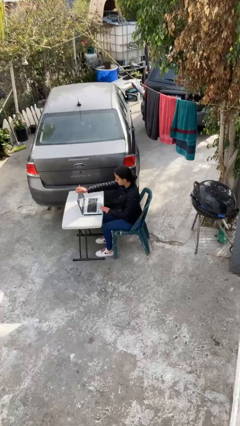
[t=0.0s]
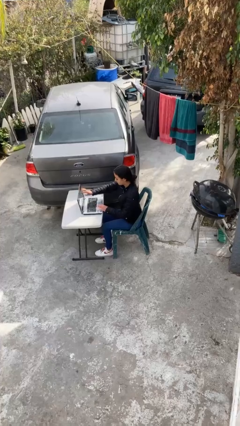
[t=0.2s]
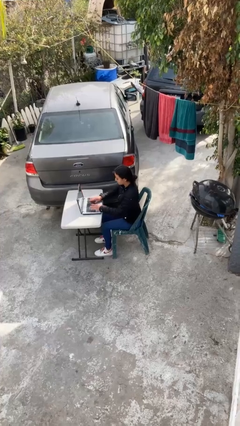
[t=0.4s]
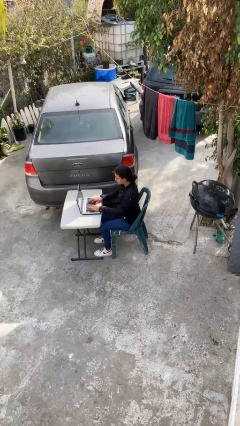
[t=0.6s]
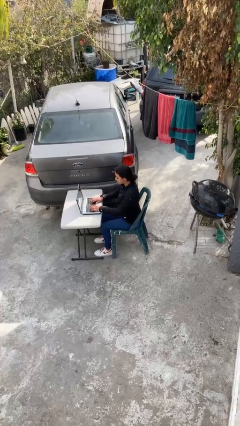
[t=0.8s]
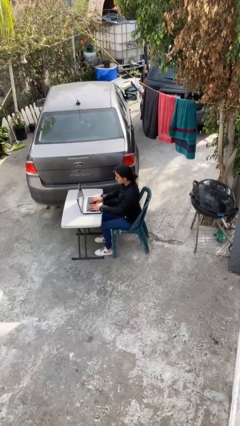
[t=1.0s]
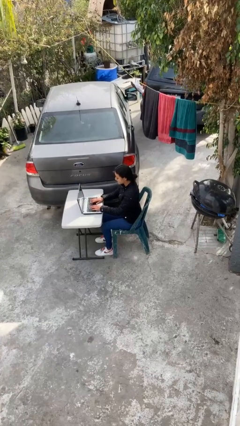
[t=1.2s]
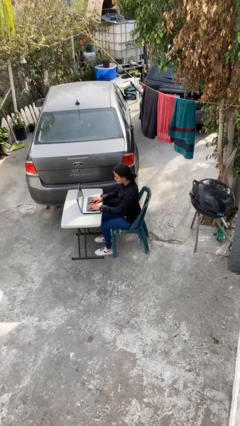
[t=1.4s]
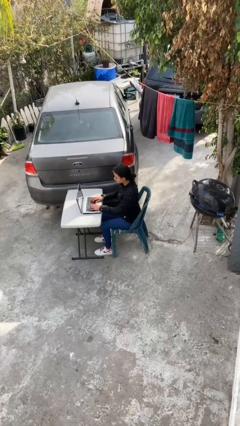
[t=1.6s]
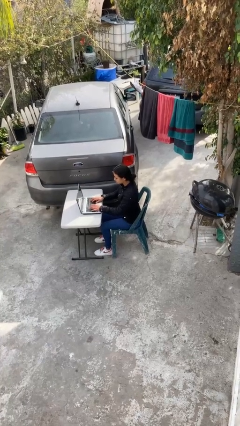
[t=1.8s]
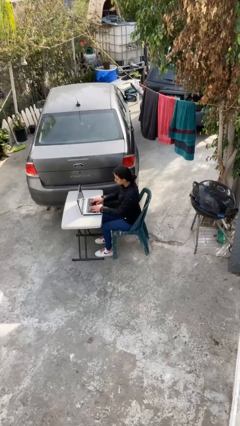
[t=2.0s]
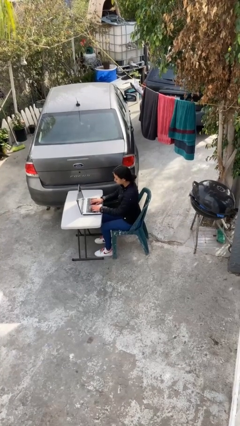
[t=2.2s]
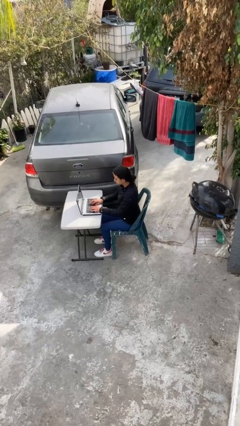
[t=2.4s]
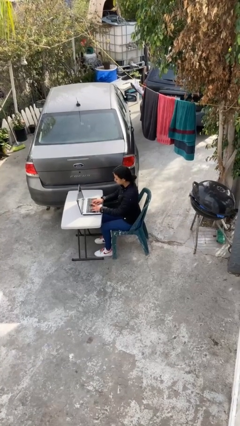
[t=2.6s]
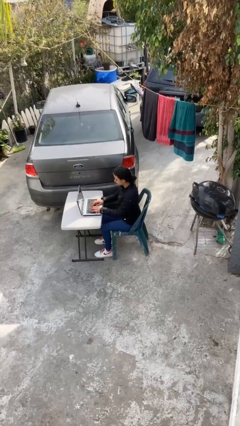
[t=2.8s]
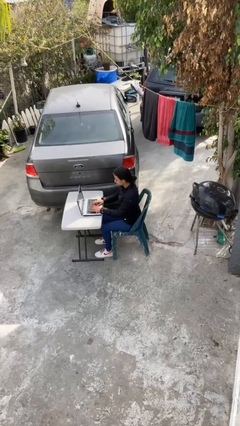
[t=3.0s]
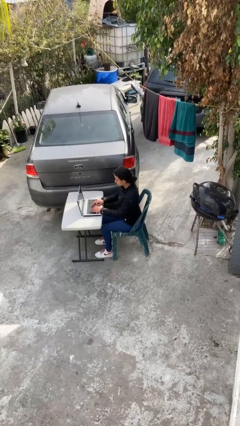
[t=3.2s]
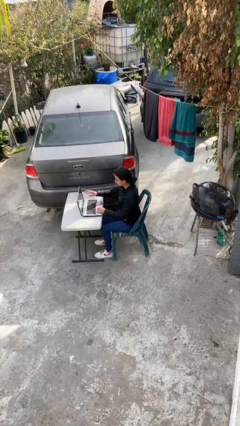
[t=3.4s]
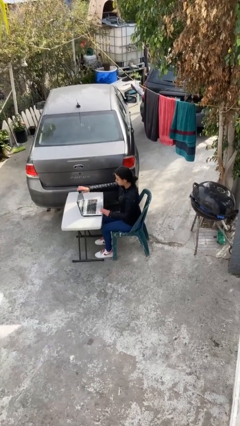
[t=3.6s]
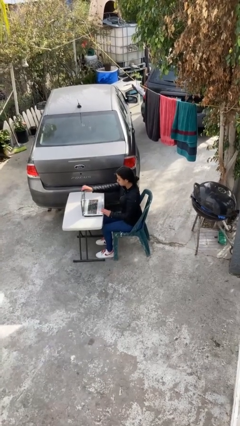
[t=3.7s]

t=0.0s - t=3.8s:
person interacts with laptop

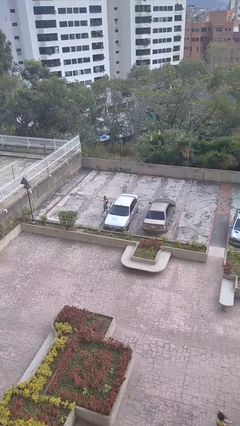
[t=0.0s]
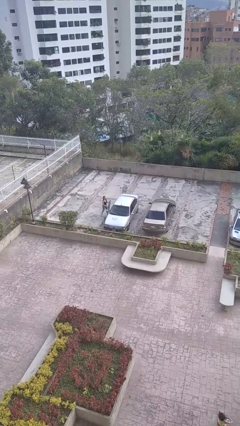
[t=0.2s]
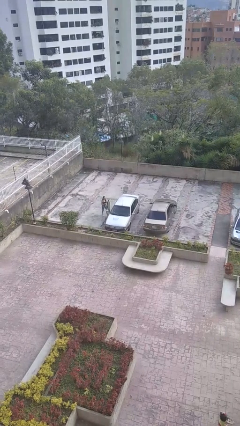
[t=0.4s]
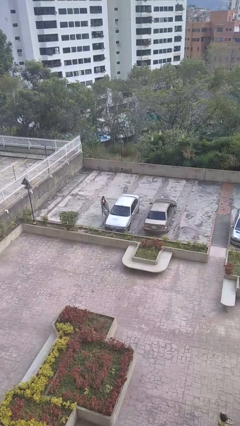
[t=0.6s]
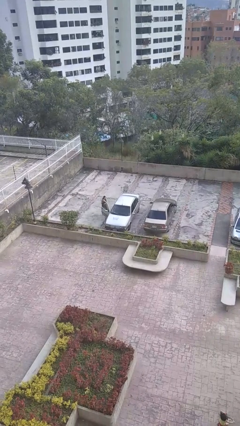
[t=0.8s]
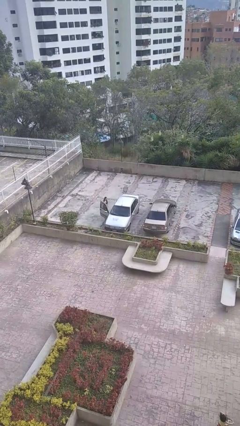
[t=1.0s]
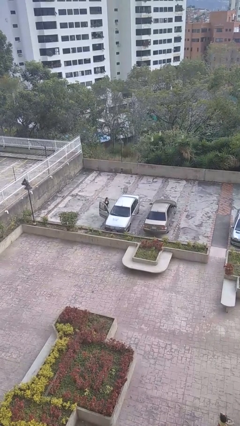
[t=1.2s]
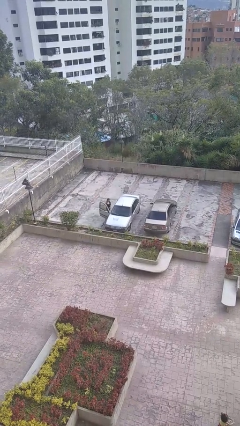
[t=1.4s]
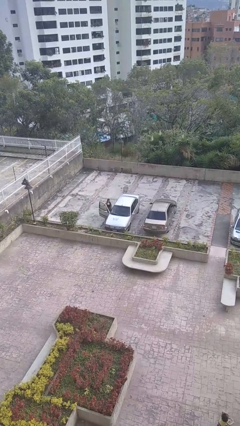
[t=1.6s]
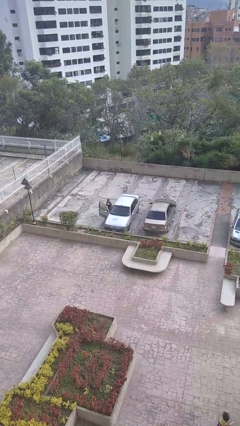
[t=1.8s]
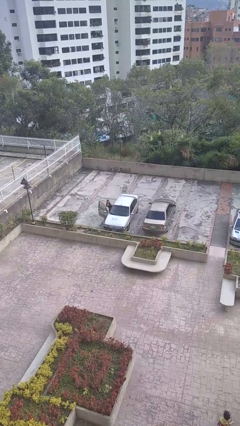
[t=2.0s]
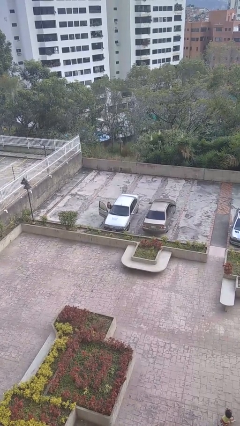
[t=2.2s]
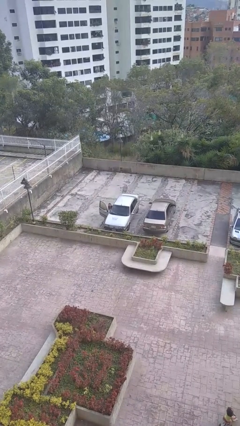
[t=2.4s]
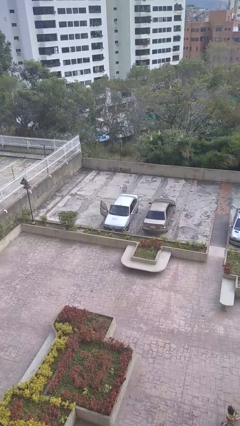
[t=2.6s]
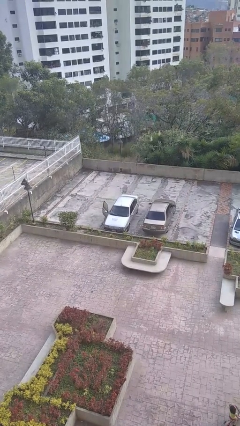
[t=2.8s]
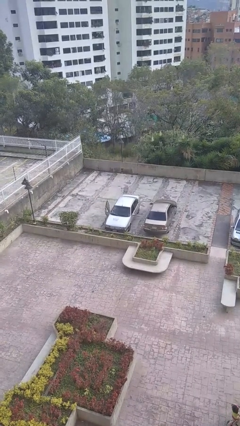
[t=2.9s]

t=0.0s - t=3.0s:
car picks up person

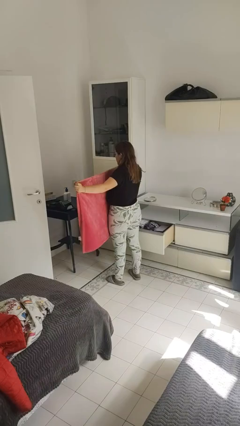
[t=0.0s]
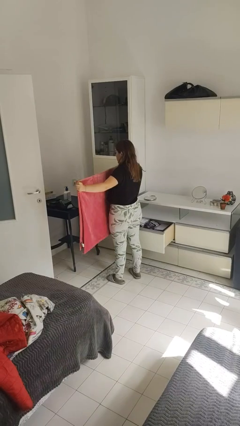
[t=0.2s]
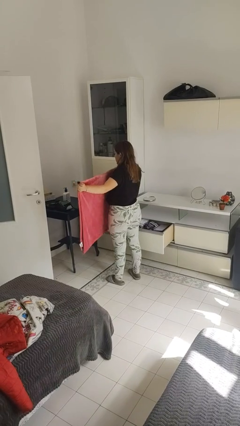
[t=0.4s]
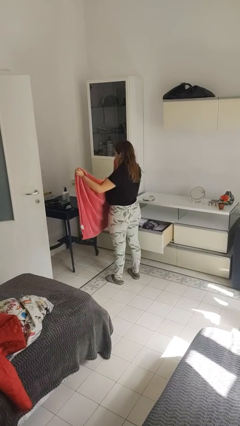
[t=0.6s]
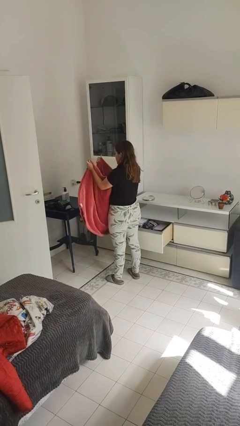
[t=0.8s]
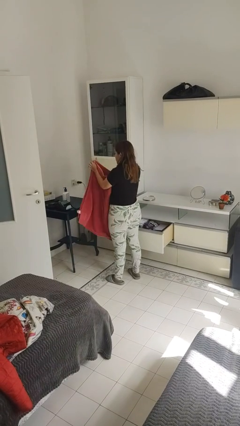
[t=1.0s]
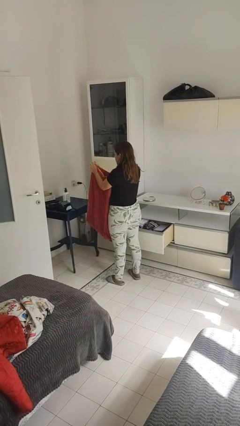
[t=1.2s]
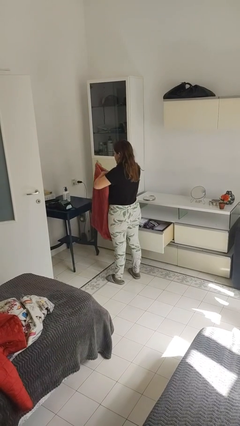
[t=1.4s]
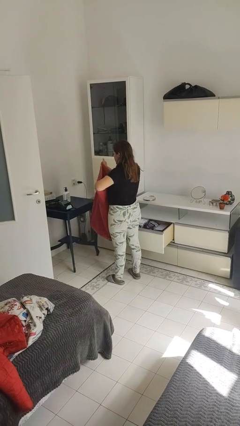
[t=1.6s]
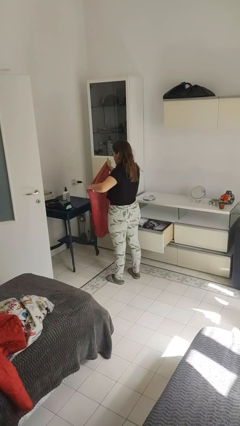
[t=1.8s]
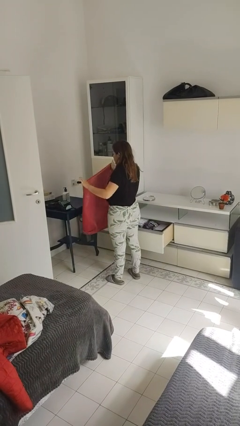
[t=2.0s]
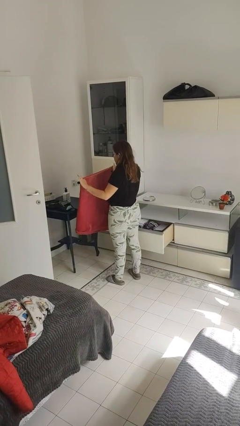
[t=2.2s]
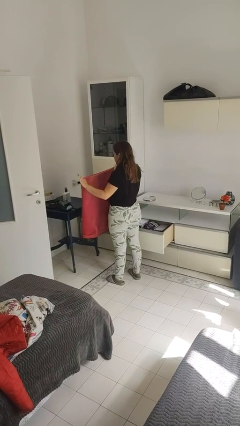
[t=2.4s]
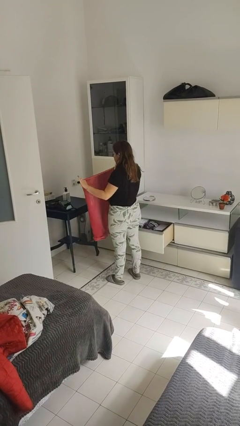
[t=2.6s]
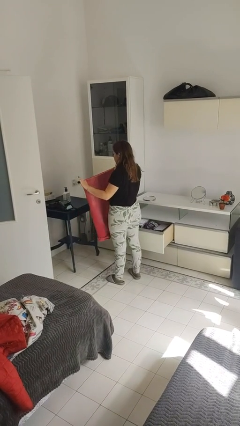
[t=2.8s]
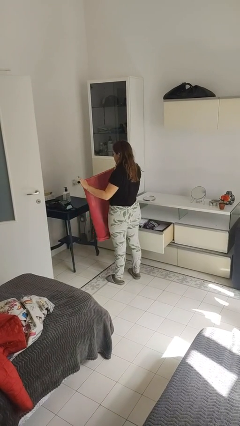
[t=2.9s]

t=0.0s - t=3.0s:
person folds blanket

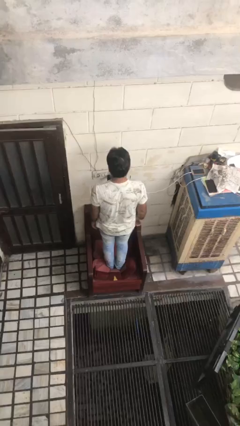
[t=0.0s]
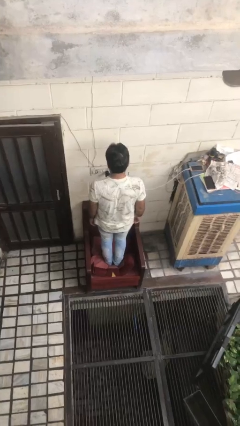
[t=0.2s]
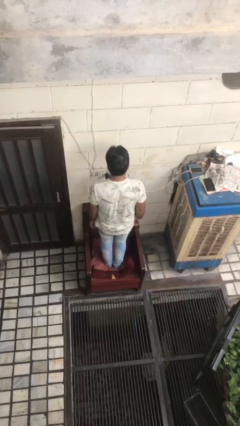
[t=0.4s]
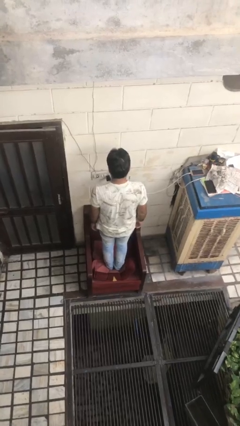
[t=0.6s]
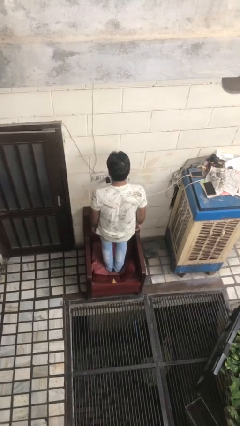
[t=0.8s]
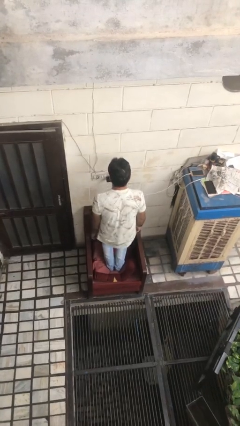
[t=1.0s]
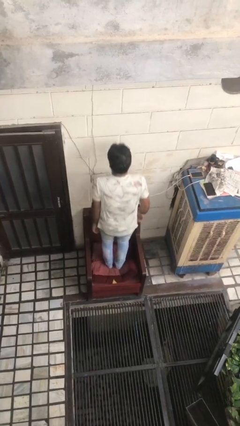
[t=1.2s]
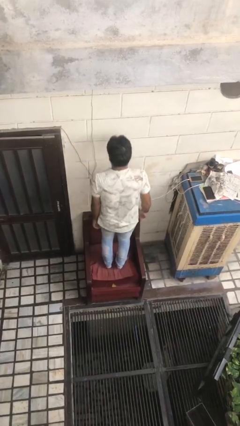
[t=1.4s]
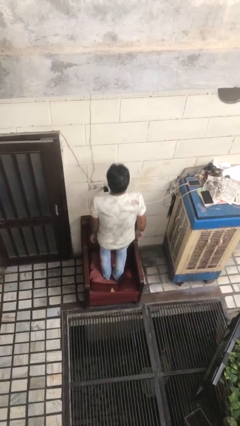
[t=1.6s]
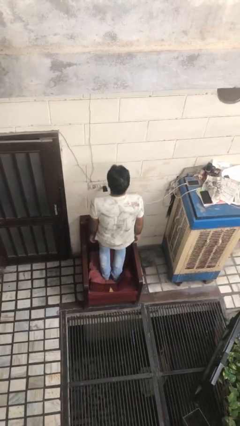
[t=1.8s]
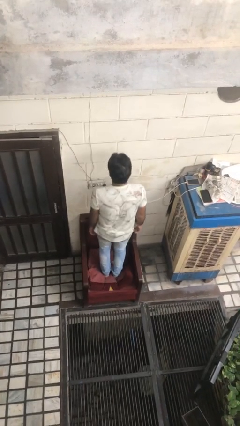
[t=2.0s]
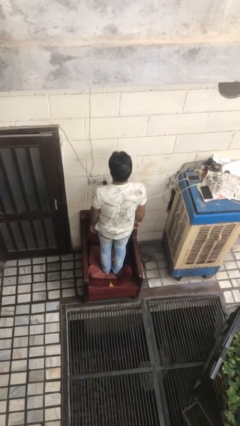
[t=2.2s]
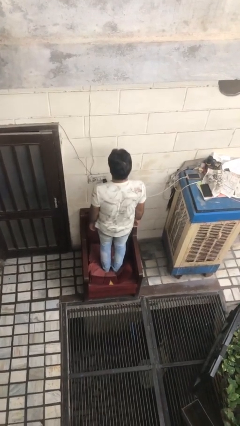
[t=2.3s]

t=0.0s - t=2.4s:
person jumps on couch

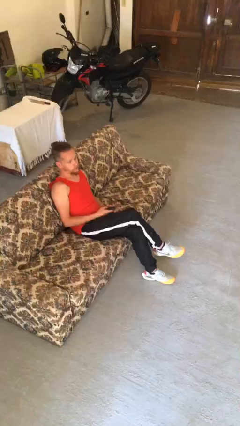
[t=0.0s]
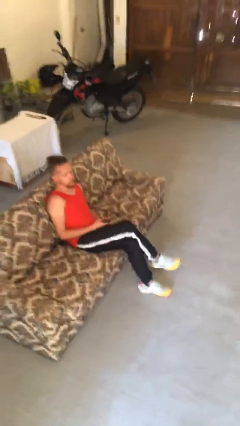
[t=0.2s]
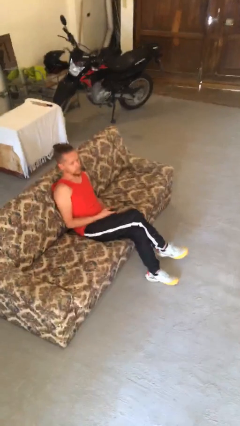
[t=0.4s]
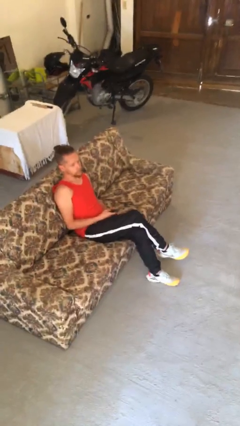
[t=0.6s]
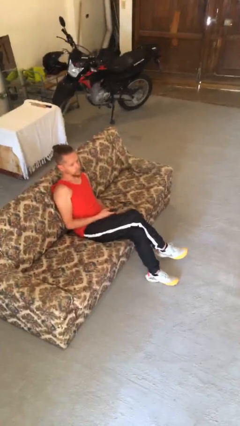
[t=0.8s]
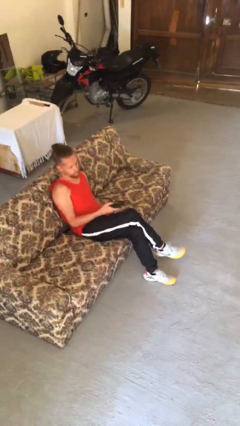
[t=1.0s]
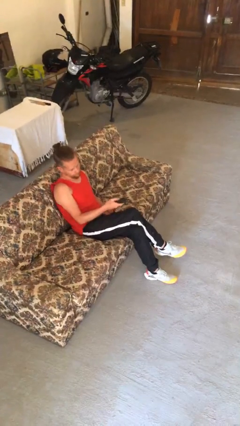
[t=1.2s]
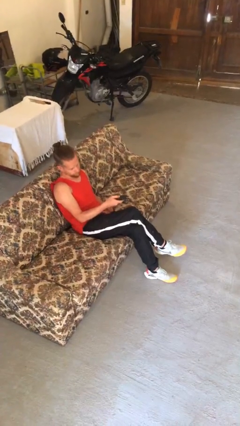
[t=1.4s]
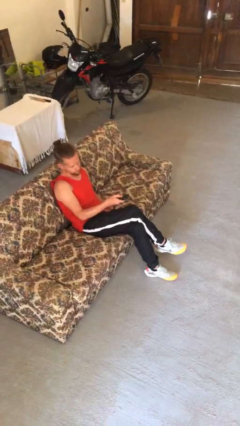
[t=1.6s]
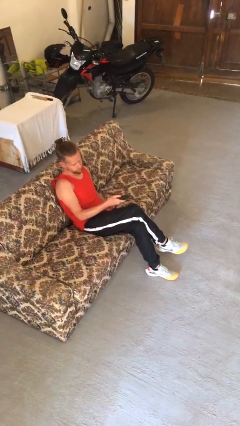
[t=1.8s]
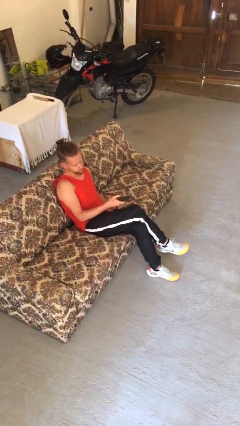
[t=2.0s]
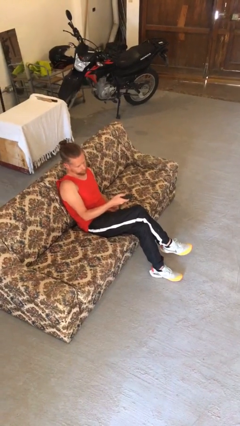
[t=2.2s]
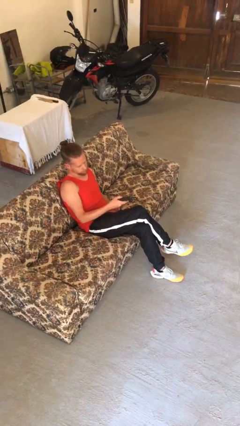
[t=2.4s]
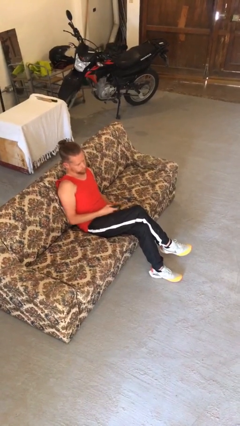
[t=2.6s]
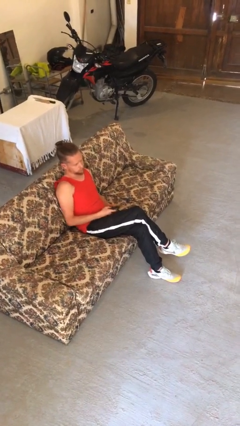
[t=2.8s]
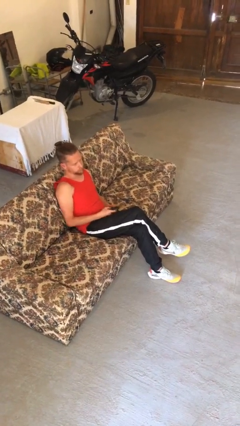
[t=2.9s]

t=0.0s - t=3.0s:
person uses television remote

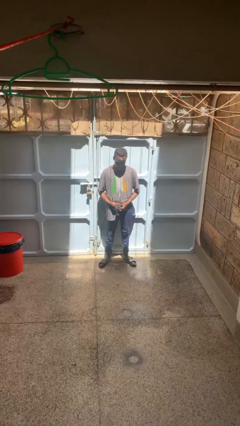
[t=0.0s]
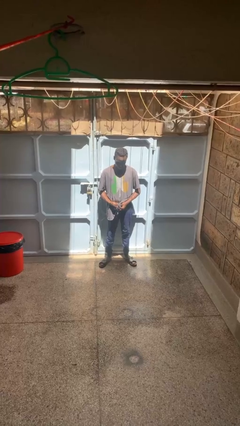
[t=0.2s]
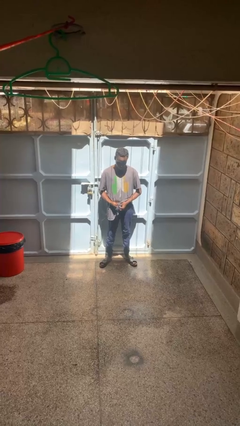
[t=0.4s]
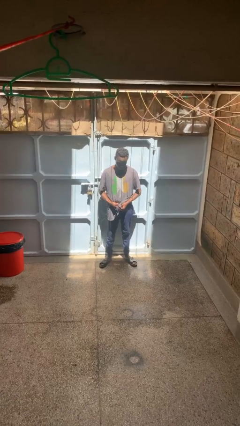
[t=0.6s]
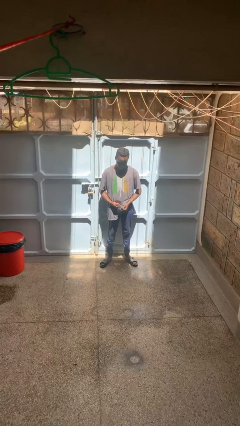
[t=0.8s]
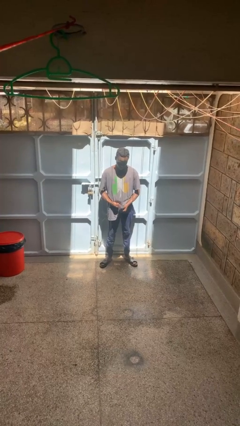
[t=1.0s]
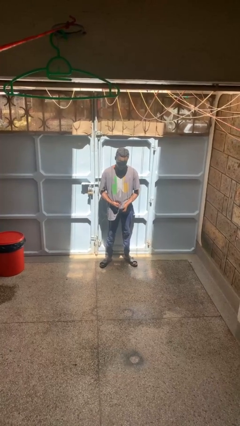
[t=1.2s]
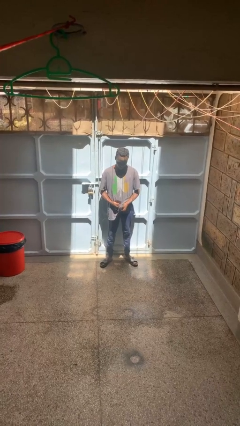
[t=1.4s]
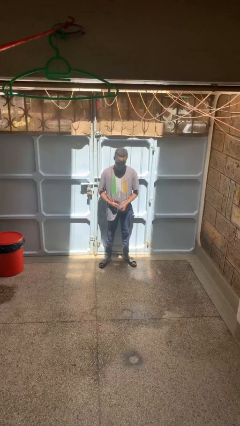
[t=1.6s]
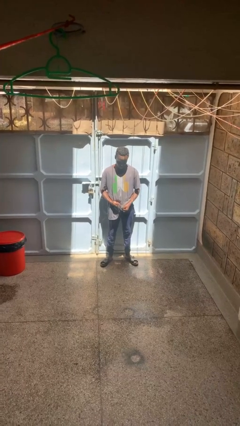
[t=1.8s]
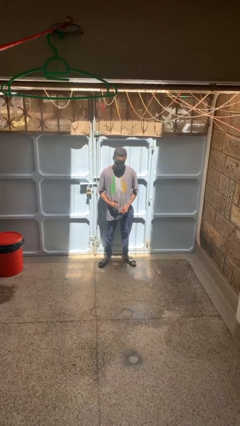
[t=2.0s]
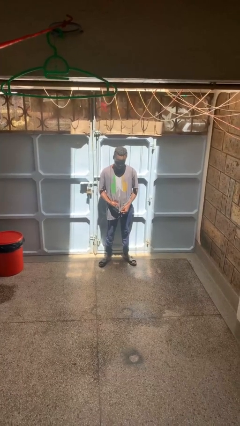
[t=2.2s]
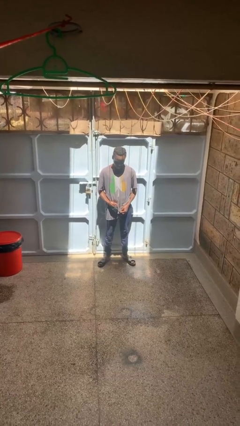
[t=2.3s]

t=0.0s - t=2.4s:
person cleans eyeglasses
